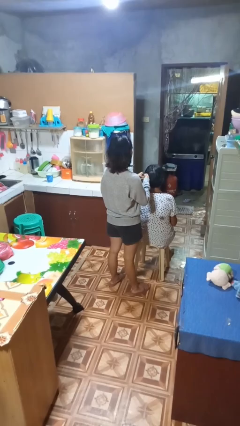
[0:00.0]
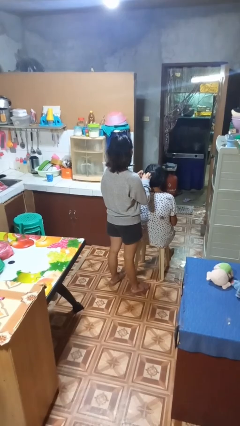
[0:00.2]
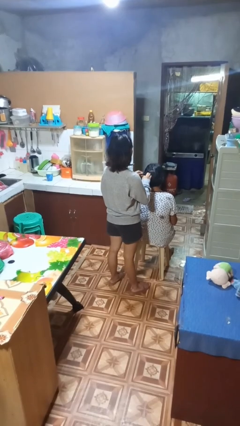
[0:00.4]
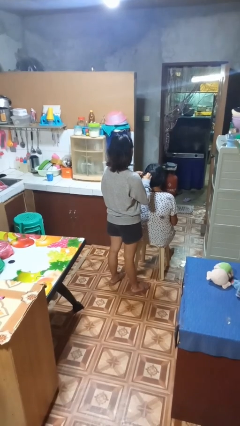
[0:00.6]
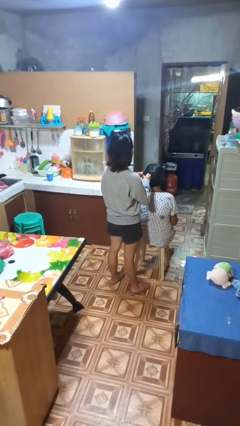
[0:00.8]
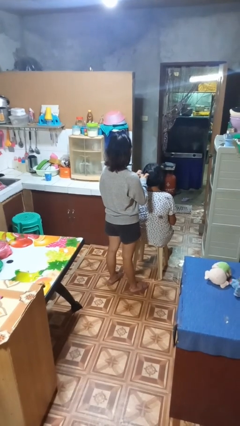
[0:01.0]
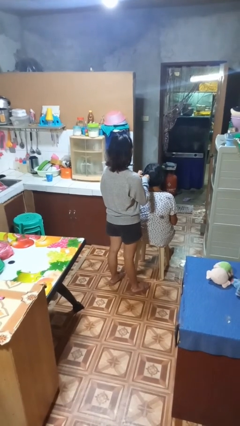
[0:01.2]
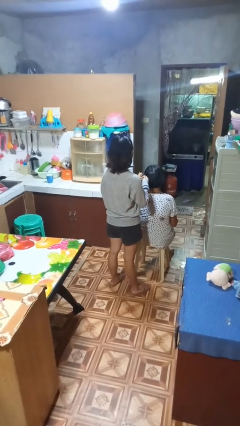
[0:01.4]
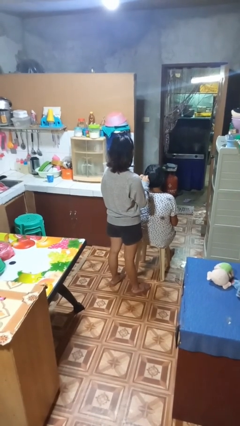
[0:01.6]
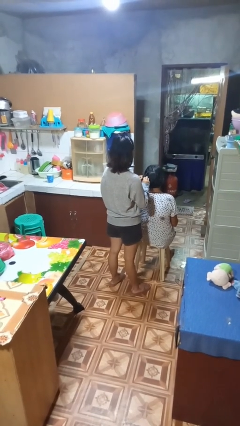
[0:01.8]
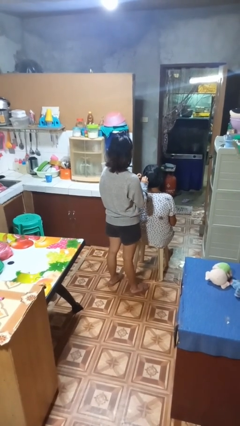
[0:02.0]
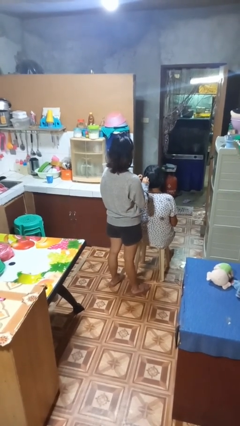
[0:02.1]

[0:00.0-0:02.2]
person braids hair of person

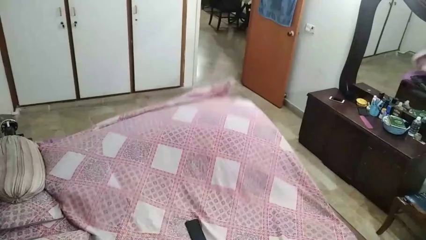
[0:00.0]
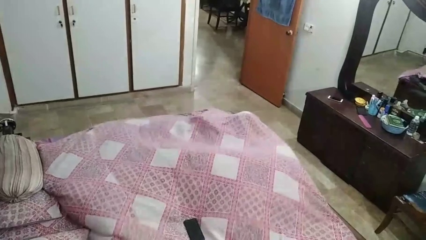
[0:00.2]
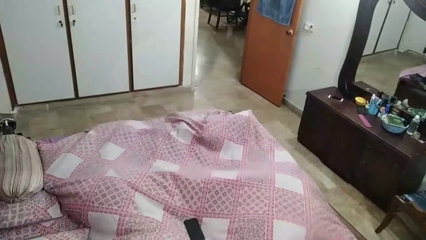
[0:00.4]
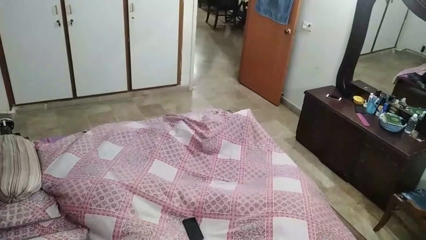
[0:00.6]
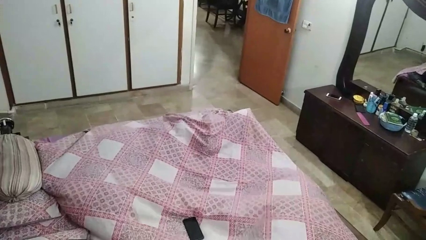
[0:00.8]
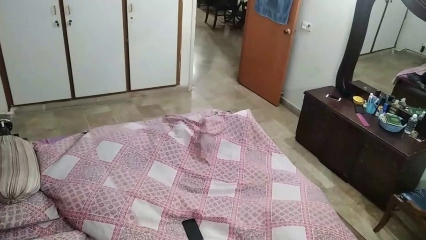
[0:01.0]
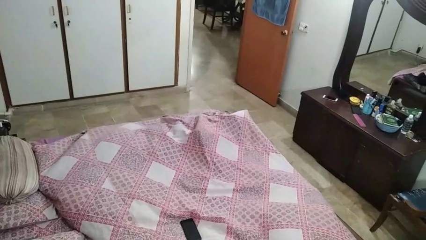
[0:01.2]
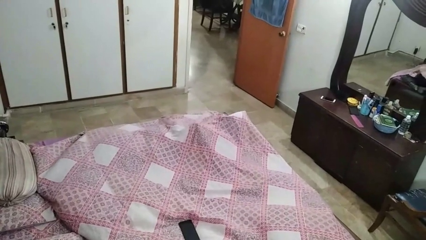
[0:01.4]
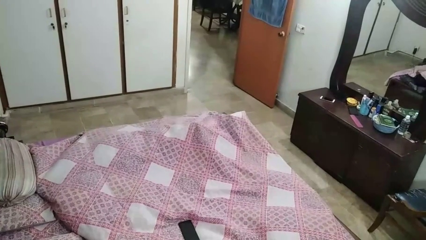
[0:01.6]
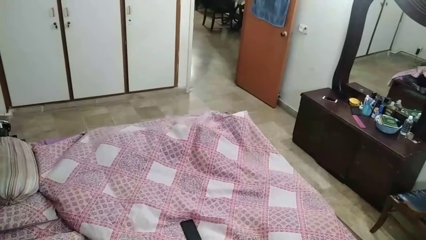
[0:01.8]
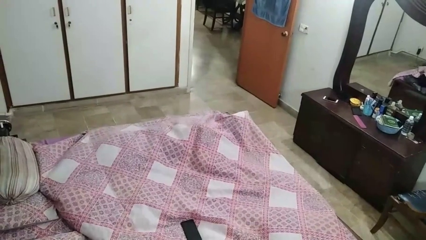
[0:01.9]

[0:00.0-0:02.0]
person covers with bedsheets

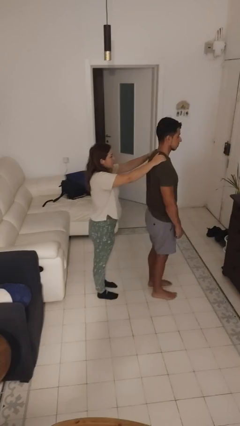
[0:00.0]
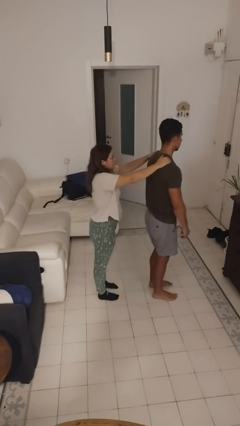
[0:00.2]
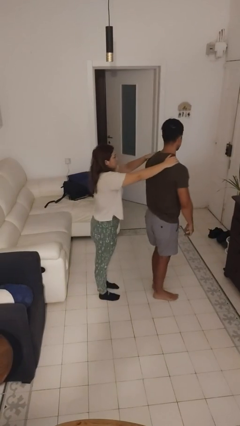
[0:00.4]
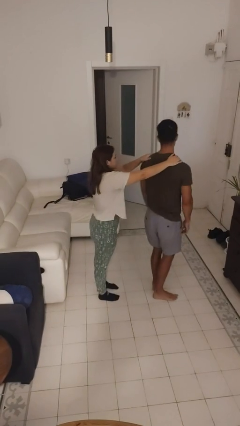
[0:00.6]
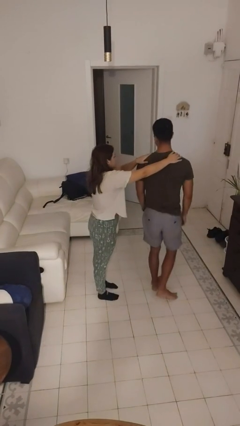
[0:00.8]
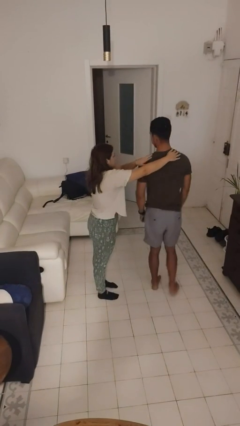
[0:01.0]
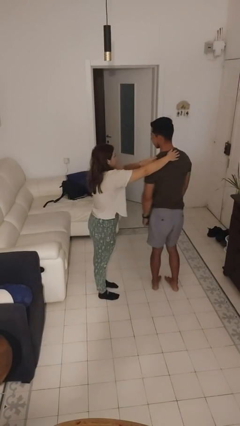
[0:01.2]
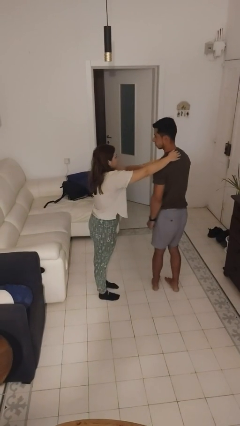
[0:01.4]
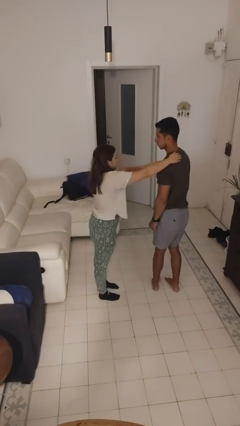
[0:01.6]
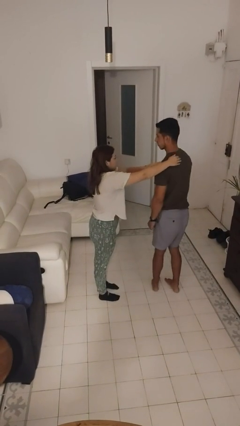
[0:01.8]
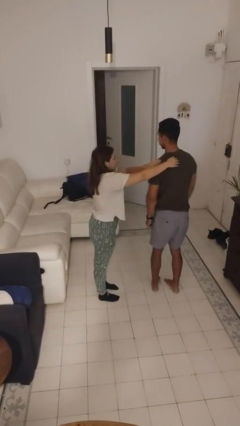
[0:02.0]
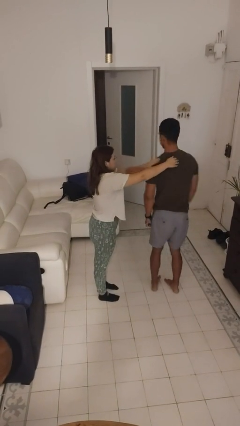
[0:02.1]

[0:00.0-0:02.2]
person spins person around

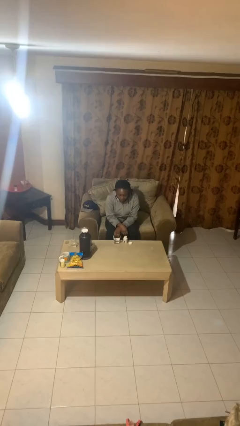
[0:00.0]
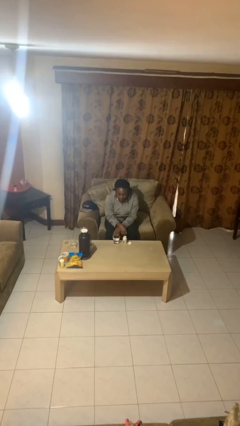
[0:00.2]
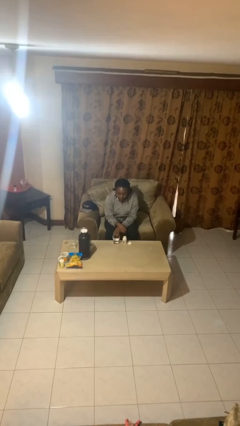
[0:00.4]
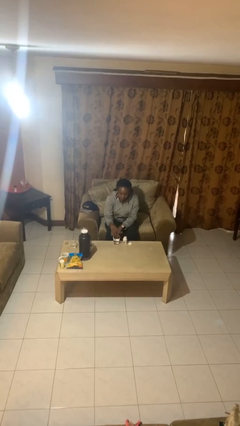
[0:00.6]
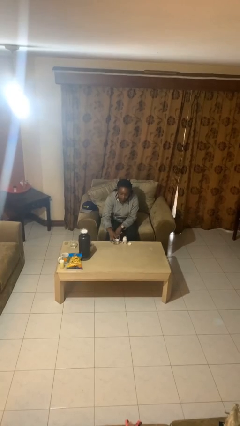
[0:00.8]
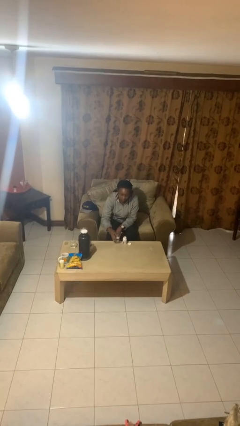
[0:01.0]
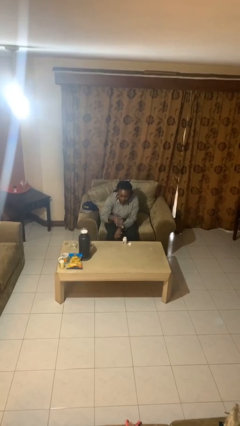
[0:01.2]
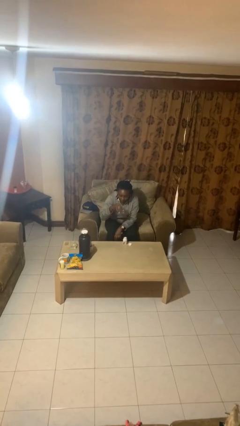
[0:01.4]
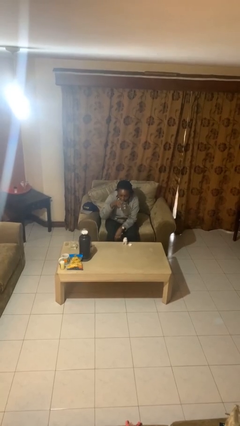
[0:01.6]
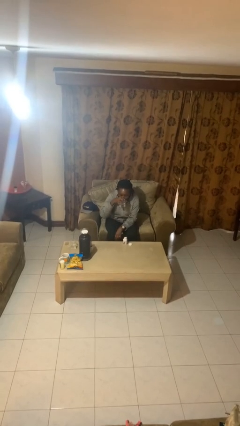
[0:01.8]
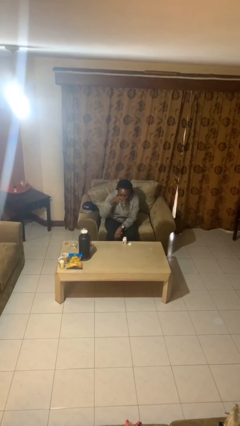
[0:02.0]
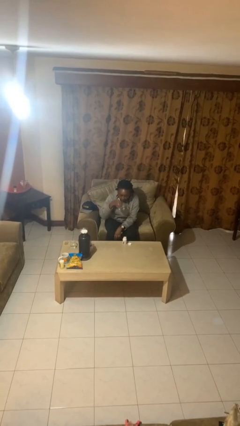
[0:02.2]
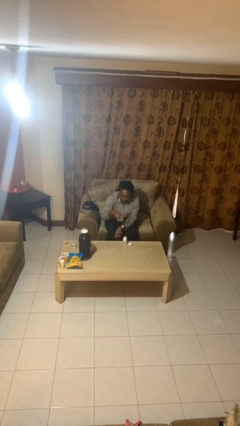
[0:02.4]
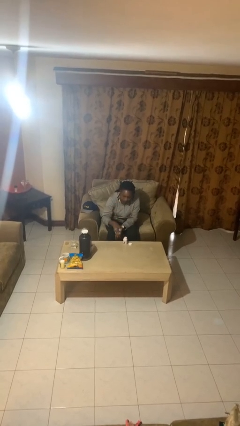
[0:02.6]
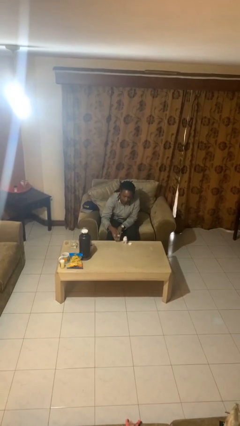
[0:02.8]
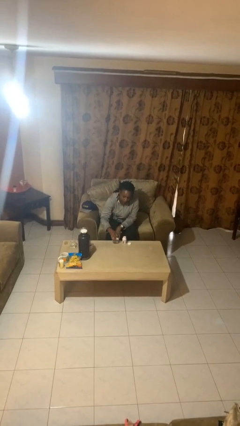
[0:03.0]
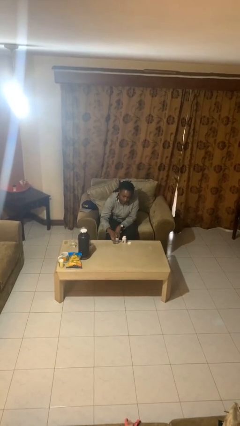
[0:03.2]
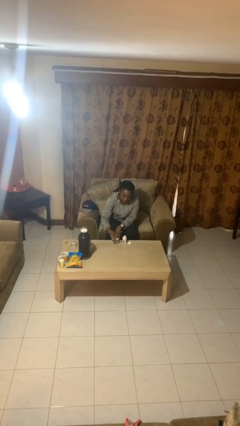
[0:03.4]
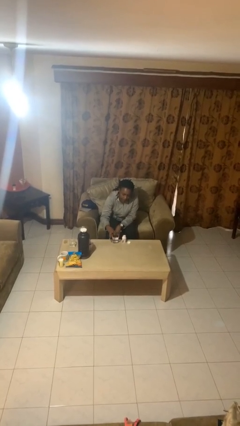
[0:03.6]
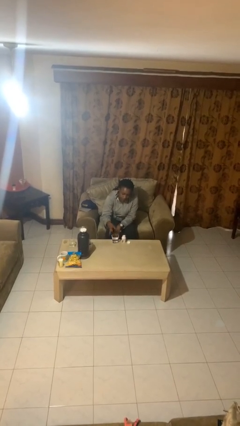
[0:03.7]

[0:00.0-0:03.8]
person drinks from cup

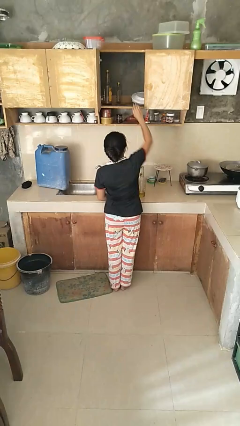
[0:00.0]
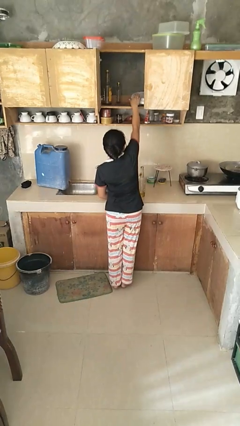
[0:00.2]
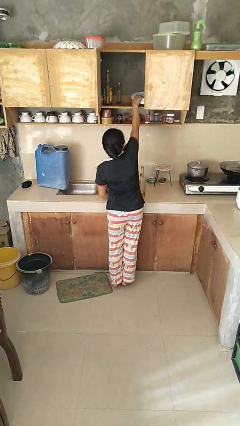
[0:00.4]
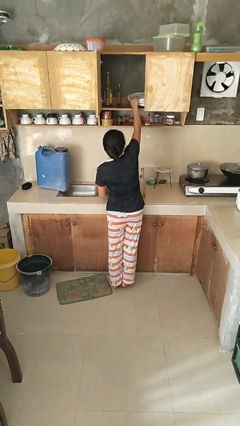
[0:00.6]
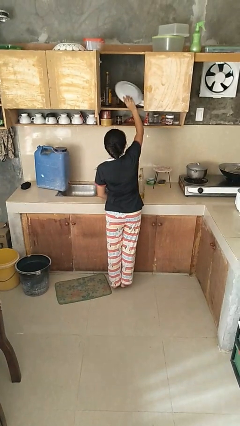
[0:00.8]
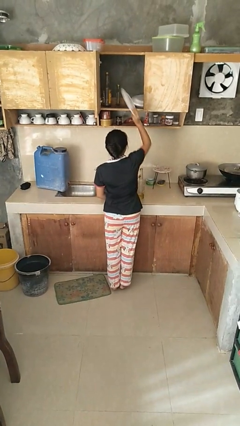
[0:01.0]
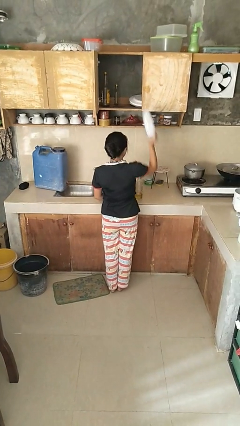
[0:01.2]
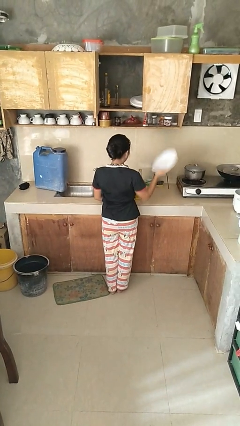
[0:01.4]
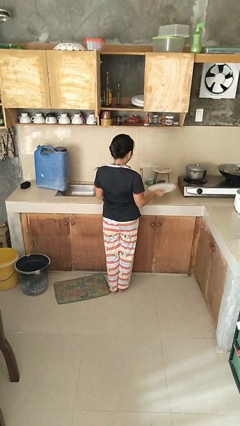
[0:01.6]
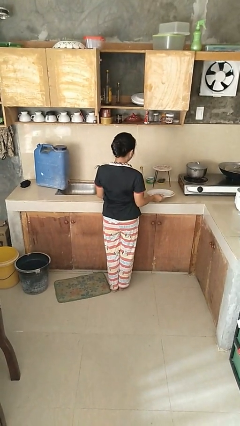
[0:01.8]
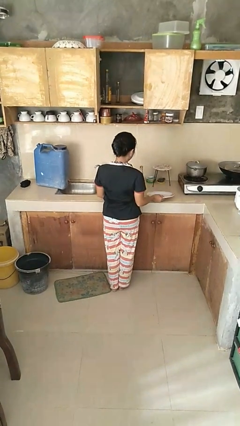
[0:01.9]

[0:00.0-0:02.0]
person takes object from cabinet

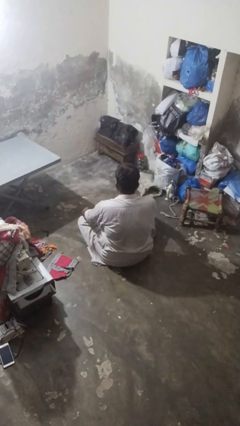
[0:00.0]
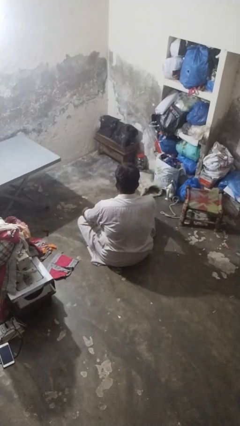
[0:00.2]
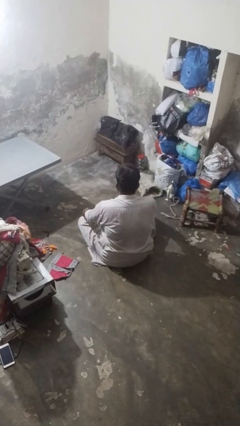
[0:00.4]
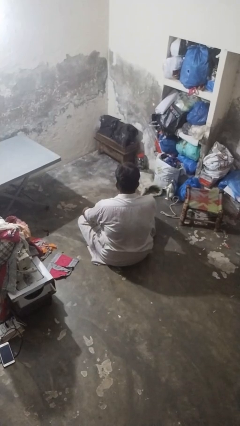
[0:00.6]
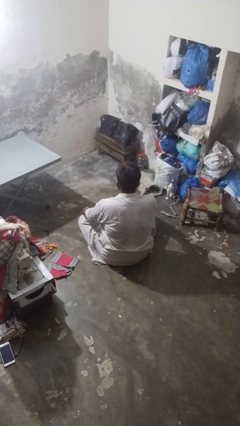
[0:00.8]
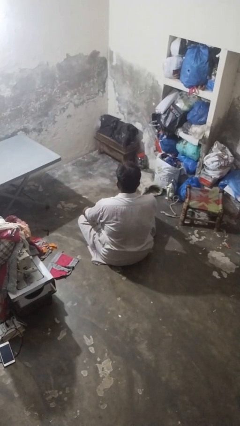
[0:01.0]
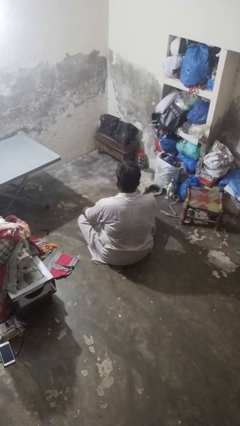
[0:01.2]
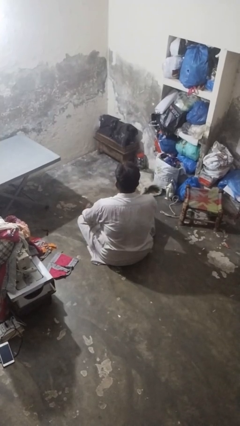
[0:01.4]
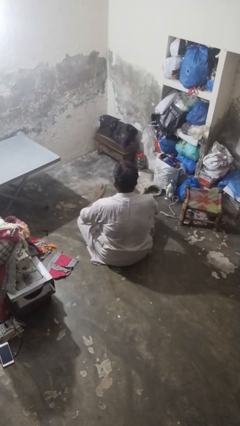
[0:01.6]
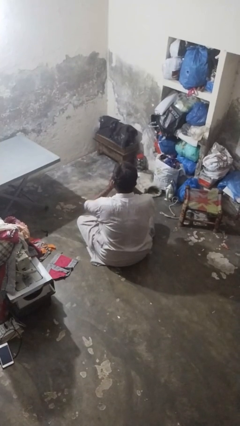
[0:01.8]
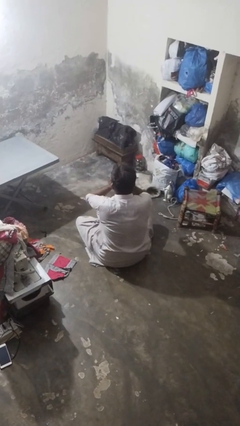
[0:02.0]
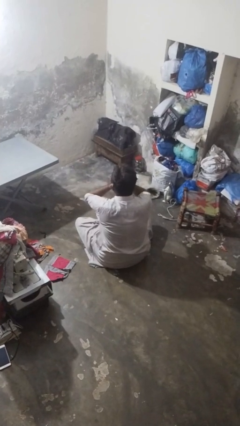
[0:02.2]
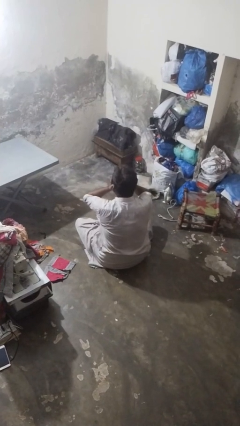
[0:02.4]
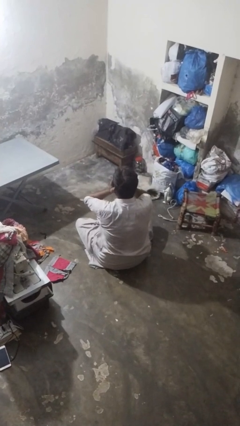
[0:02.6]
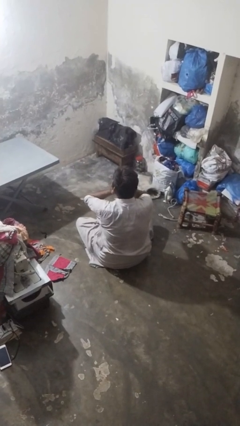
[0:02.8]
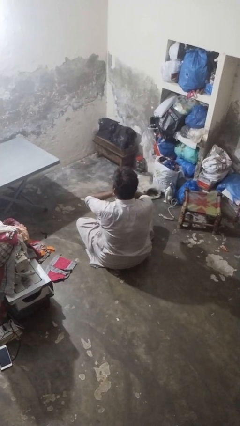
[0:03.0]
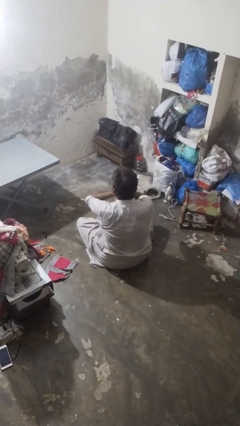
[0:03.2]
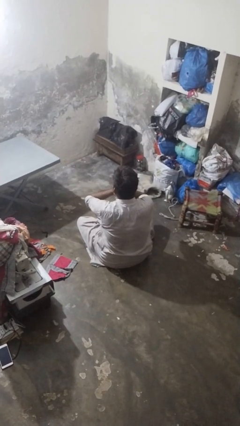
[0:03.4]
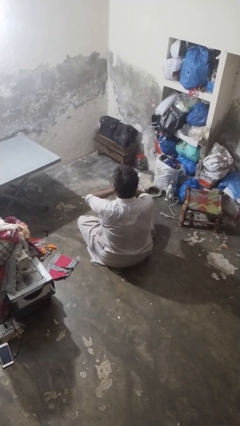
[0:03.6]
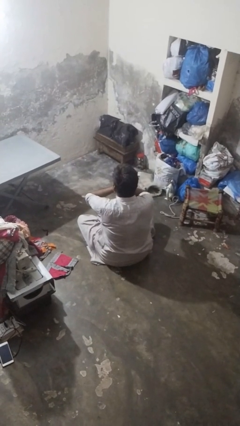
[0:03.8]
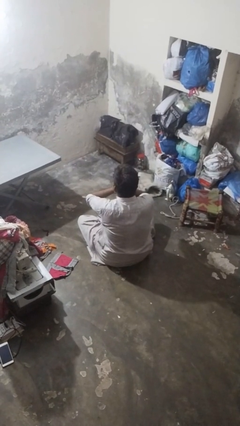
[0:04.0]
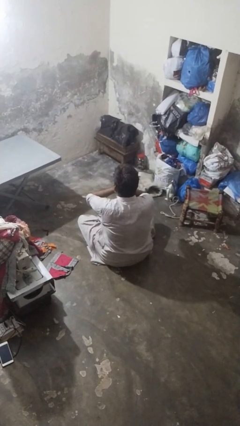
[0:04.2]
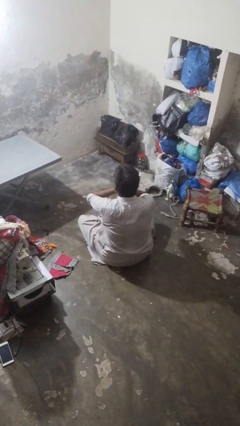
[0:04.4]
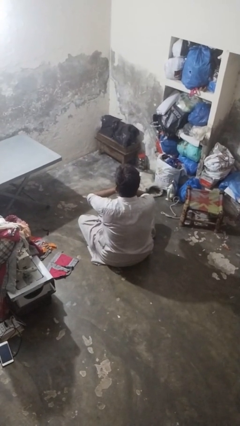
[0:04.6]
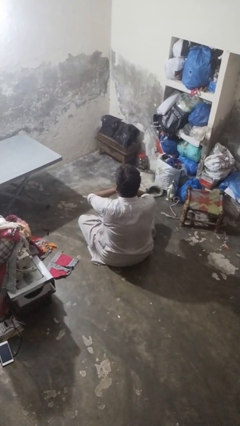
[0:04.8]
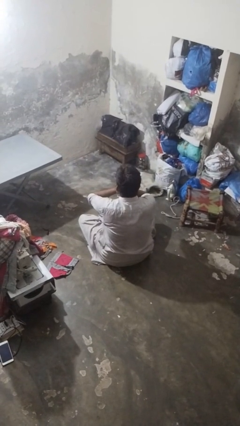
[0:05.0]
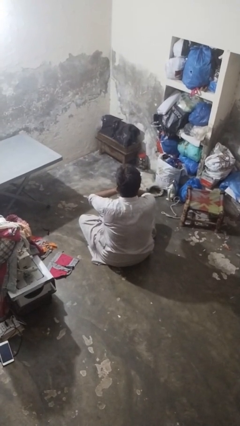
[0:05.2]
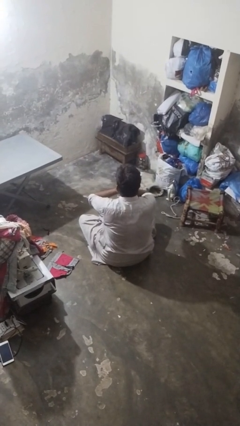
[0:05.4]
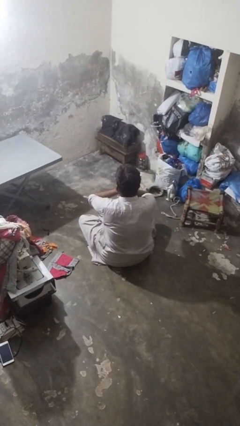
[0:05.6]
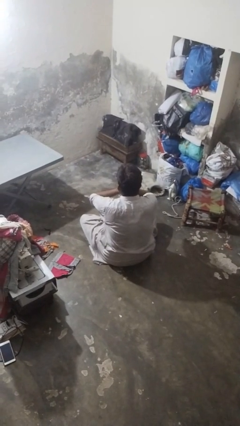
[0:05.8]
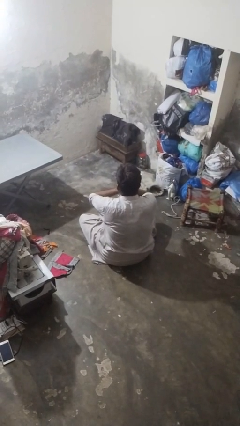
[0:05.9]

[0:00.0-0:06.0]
person covers face with hands
